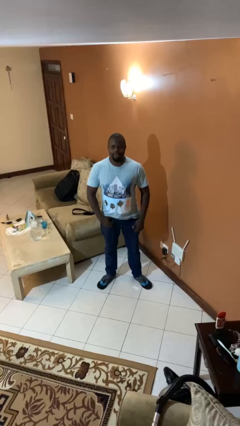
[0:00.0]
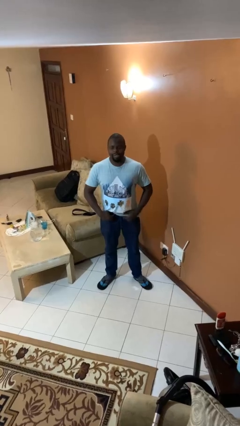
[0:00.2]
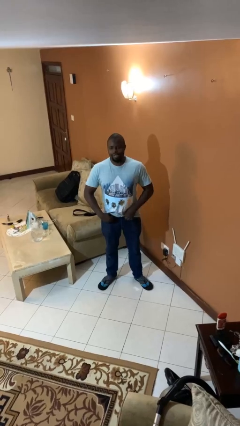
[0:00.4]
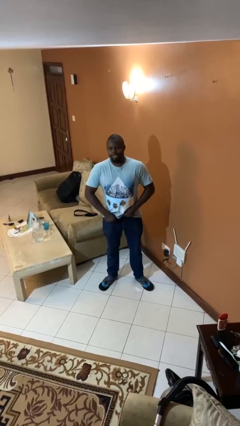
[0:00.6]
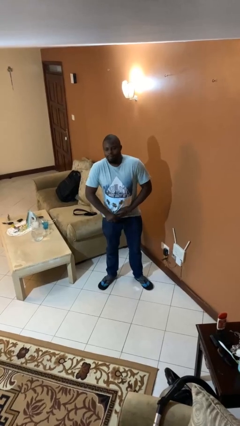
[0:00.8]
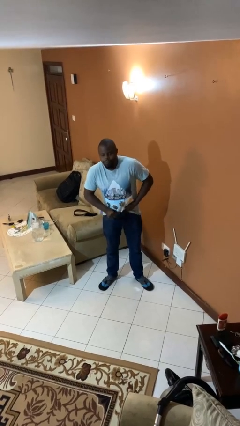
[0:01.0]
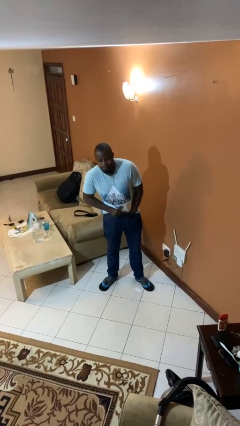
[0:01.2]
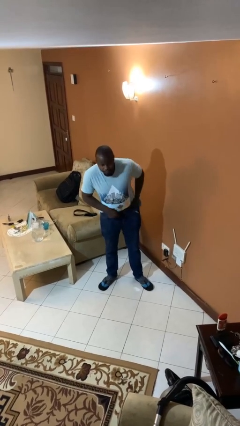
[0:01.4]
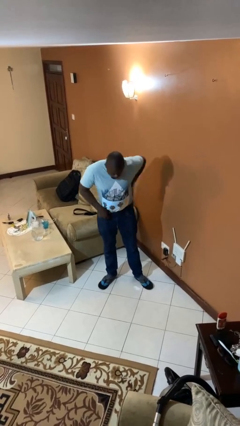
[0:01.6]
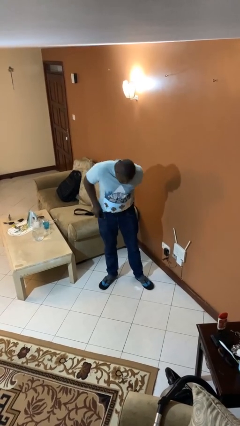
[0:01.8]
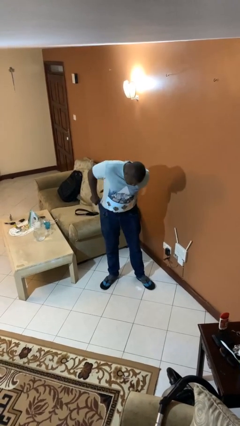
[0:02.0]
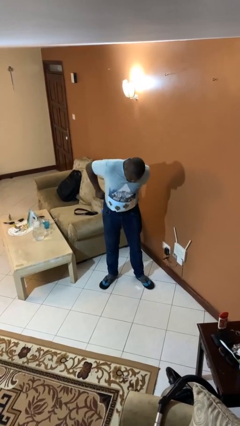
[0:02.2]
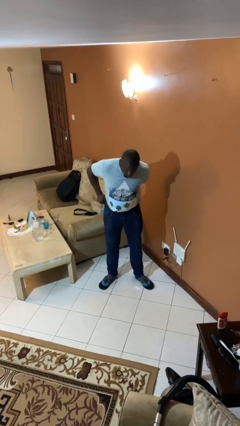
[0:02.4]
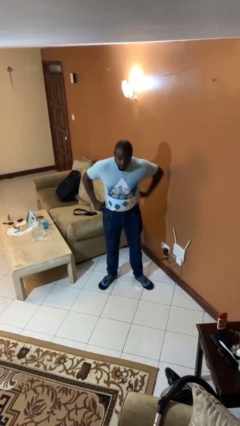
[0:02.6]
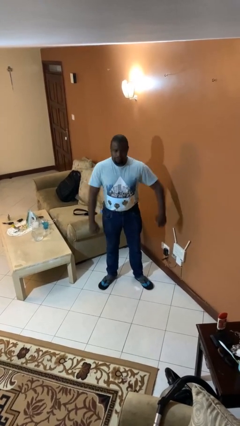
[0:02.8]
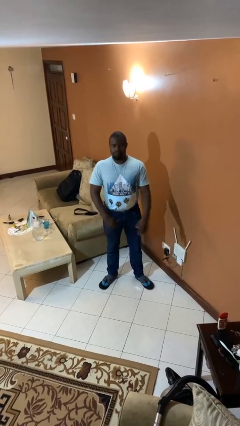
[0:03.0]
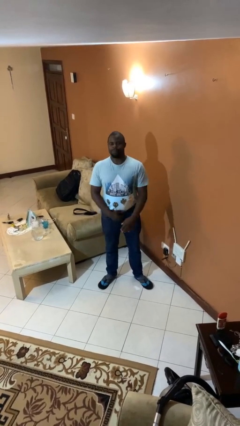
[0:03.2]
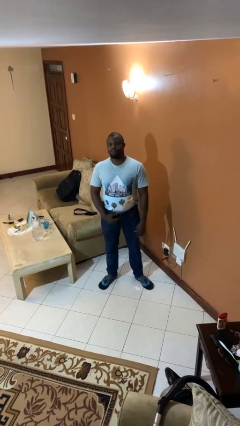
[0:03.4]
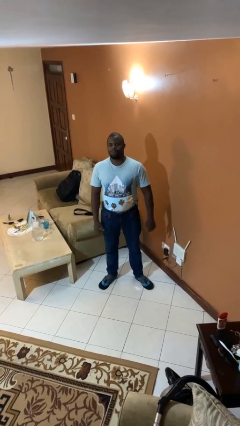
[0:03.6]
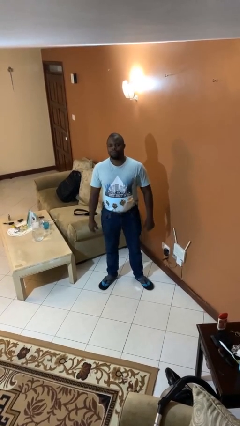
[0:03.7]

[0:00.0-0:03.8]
person tucks in shirt

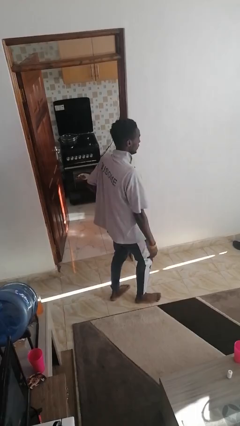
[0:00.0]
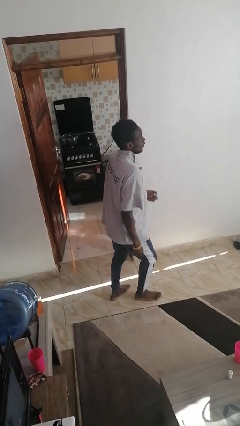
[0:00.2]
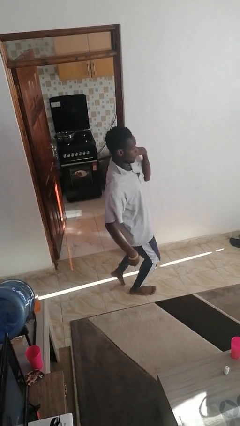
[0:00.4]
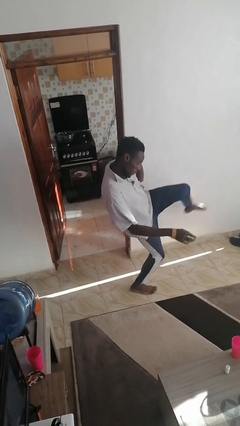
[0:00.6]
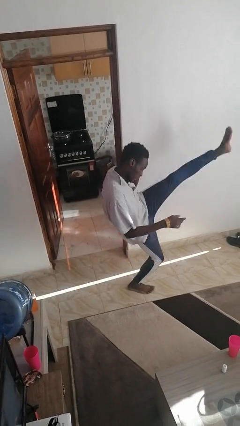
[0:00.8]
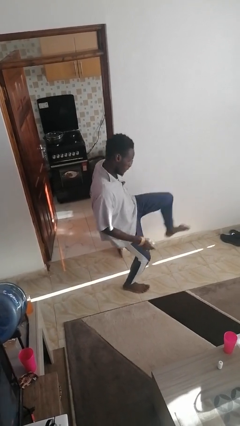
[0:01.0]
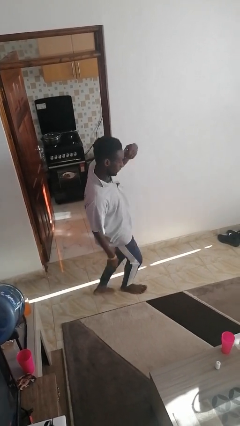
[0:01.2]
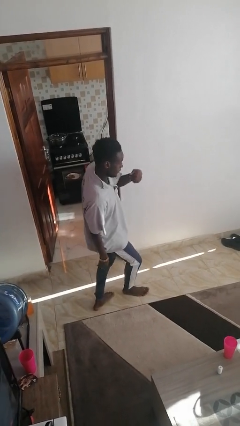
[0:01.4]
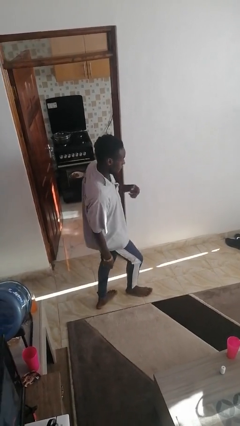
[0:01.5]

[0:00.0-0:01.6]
person karate kicks

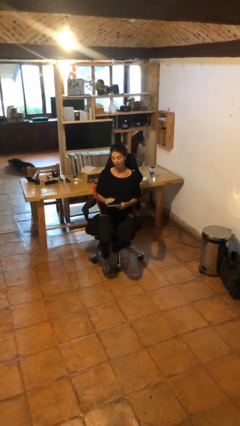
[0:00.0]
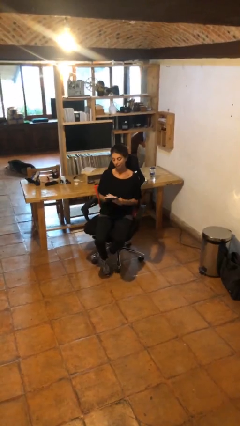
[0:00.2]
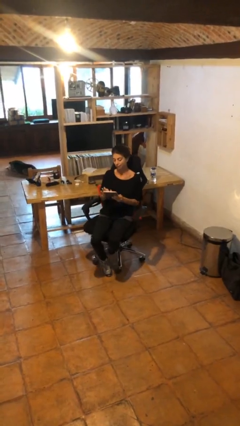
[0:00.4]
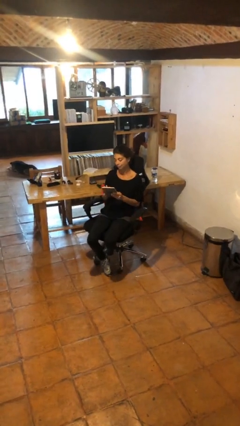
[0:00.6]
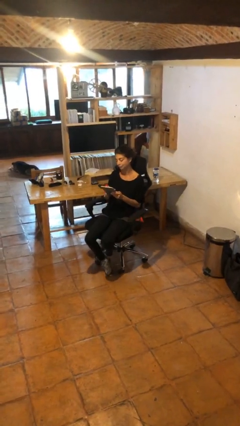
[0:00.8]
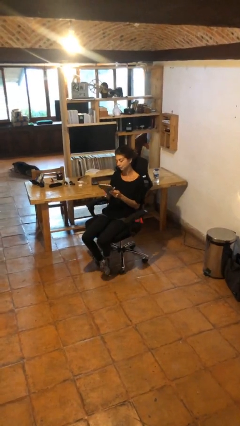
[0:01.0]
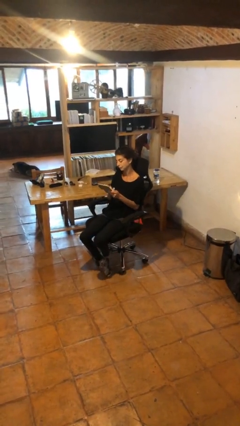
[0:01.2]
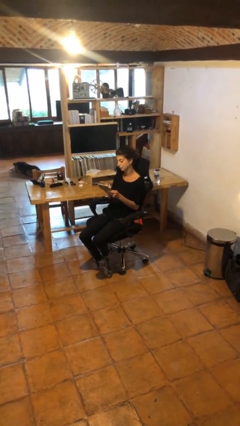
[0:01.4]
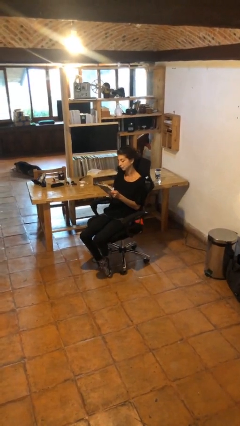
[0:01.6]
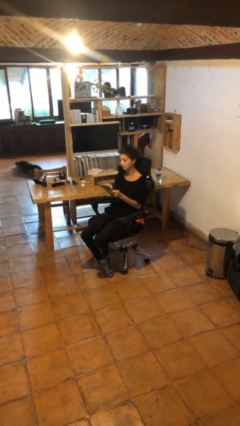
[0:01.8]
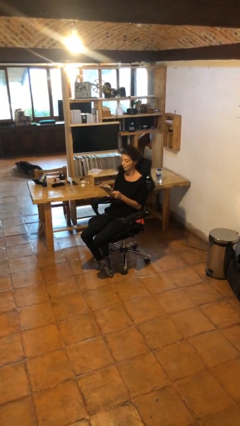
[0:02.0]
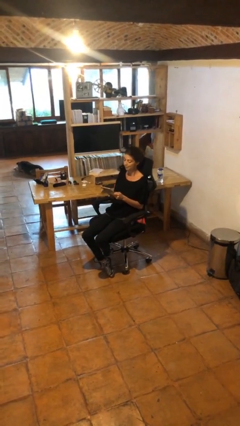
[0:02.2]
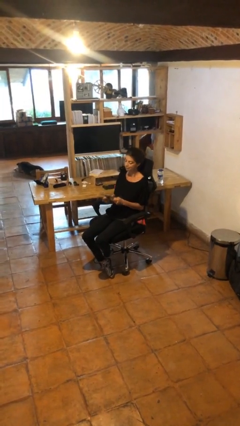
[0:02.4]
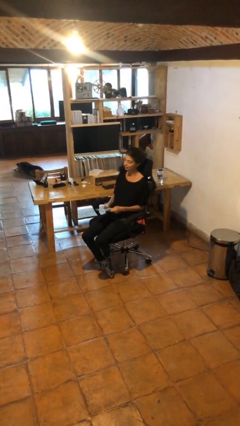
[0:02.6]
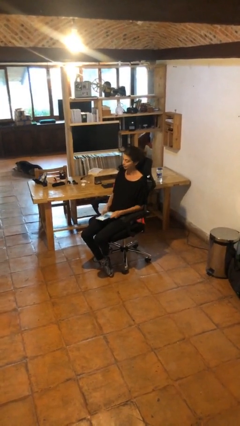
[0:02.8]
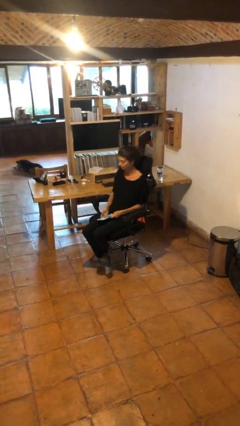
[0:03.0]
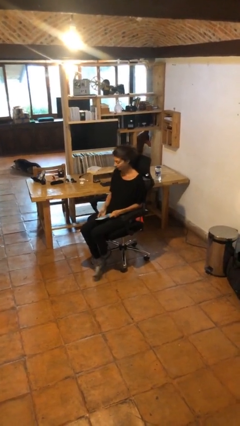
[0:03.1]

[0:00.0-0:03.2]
person interacts with tablet

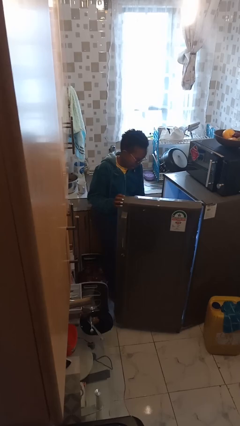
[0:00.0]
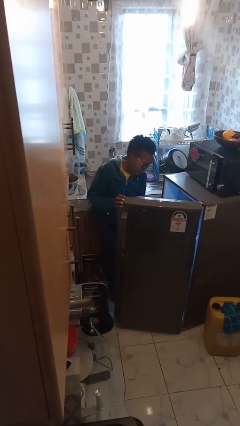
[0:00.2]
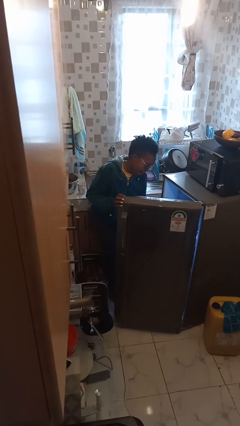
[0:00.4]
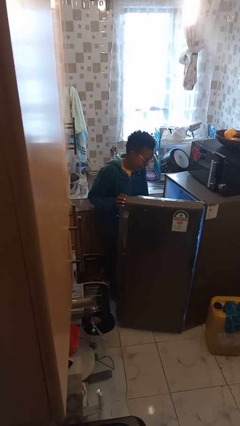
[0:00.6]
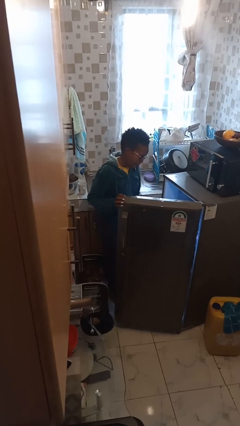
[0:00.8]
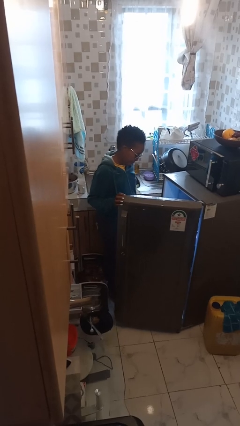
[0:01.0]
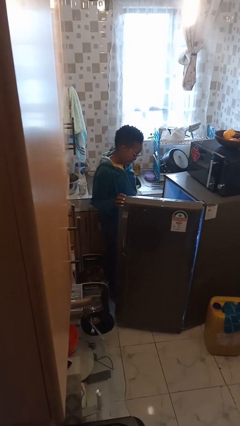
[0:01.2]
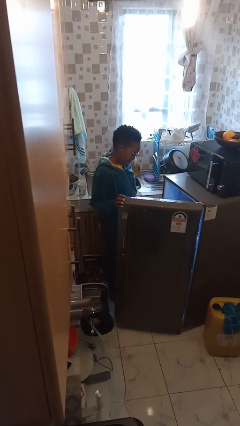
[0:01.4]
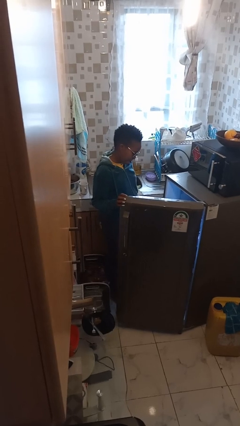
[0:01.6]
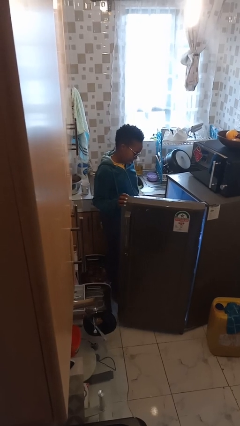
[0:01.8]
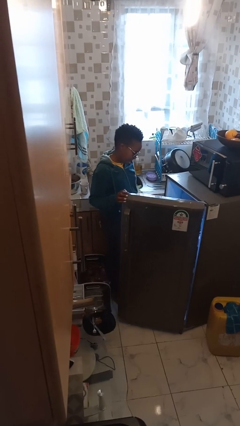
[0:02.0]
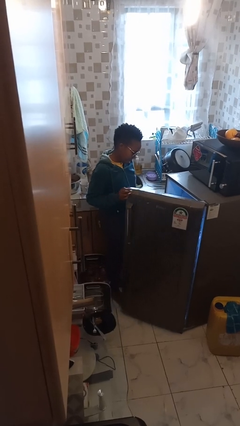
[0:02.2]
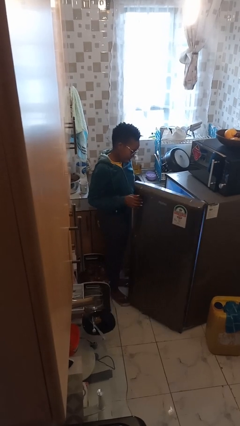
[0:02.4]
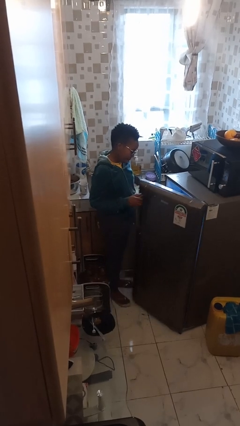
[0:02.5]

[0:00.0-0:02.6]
person puts object into refrigerator

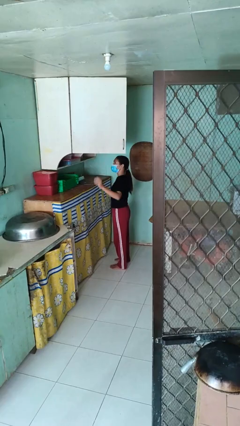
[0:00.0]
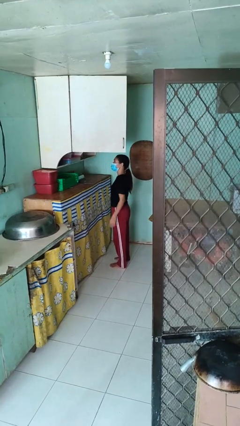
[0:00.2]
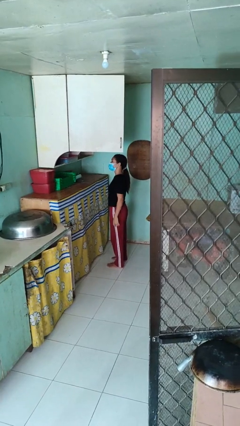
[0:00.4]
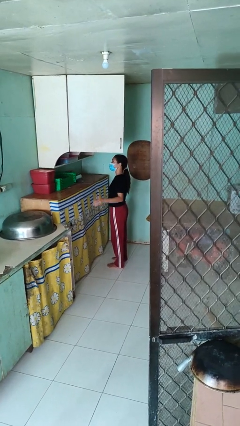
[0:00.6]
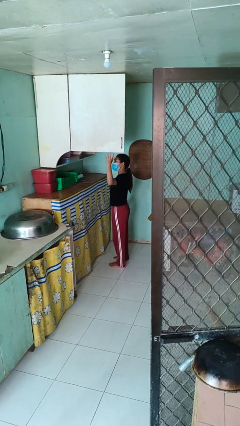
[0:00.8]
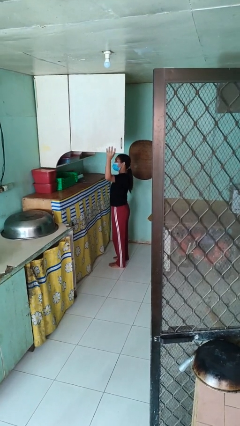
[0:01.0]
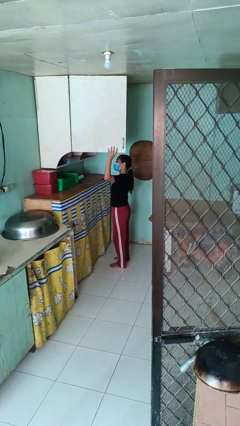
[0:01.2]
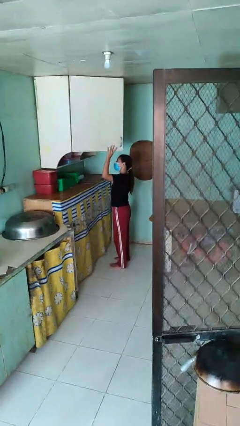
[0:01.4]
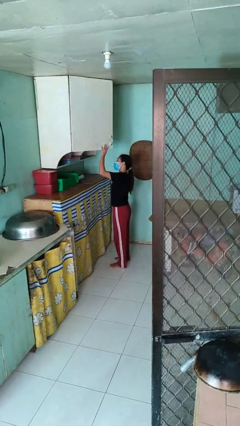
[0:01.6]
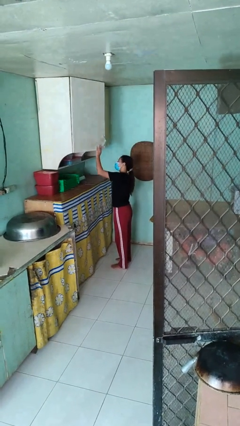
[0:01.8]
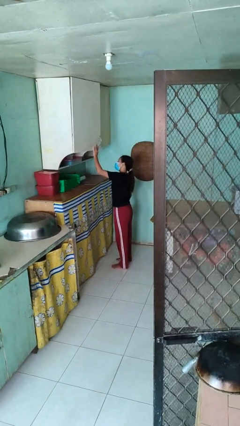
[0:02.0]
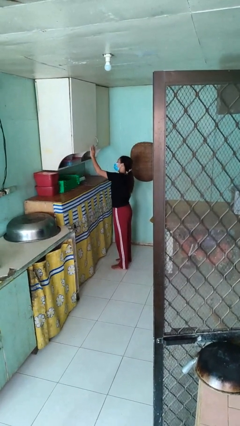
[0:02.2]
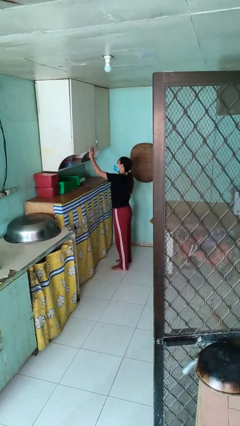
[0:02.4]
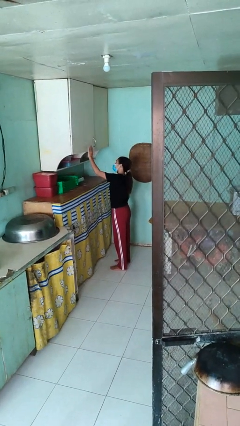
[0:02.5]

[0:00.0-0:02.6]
person closes cabinet

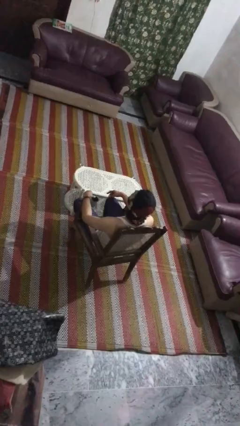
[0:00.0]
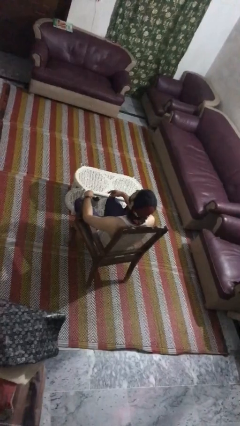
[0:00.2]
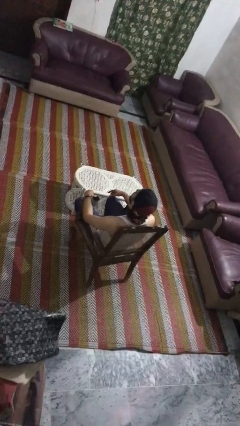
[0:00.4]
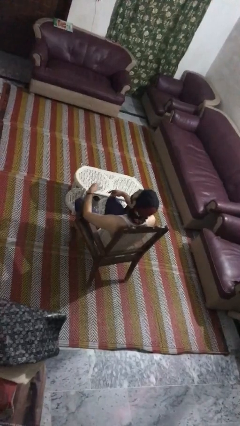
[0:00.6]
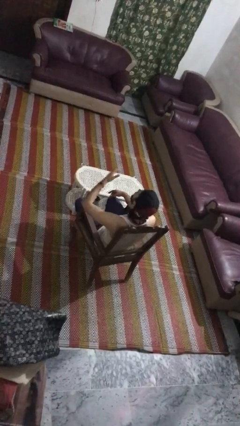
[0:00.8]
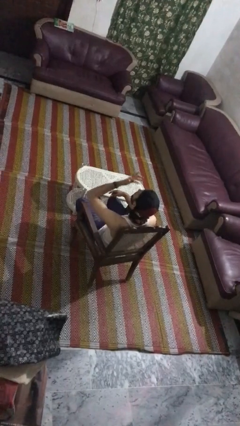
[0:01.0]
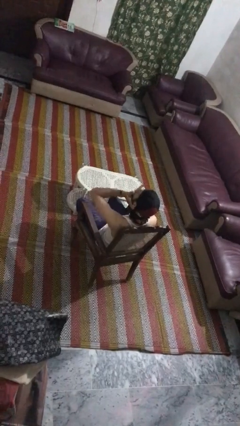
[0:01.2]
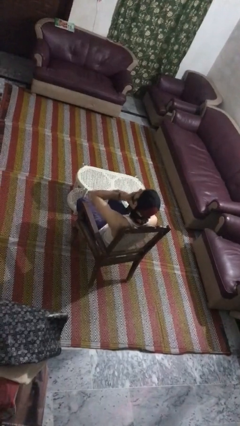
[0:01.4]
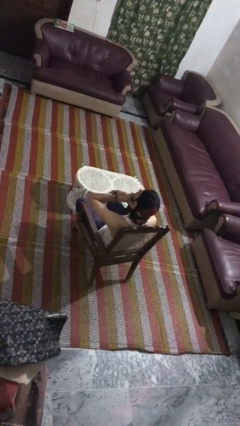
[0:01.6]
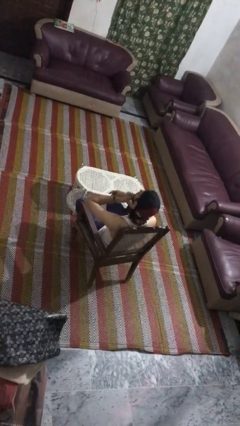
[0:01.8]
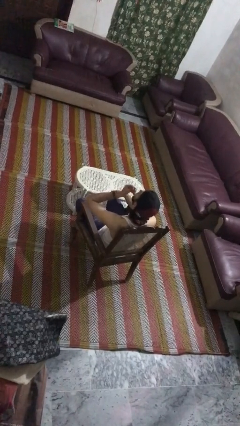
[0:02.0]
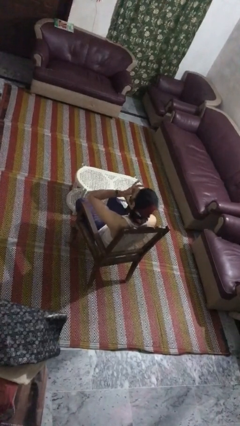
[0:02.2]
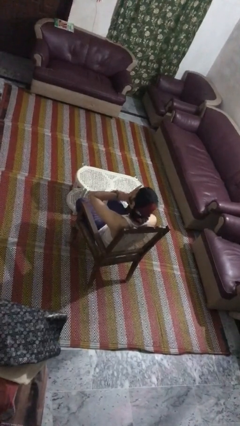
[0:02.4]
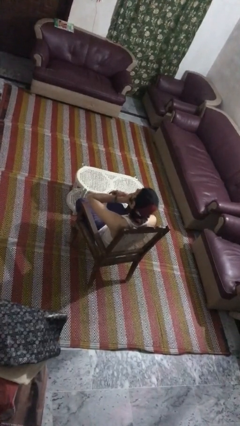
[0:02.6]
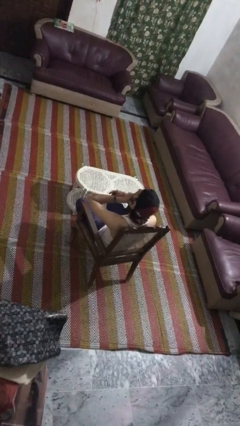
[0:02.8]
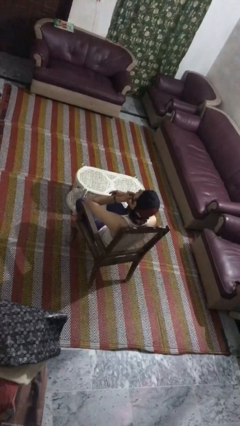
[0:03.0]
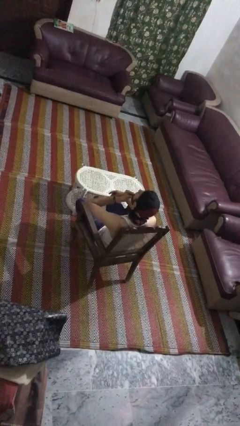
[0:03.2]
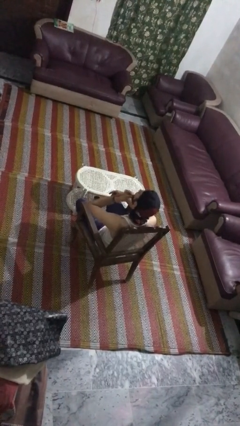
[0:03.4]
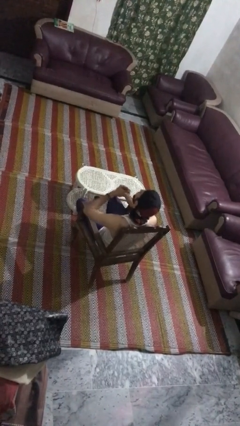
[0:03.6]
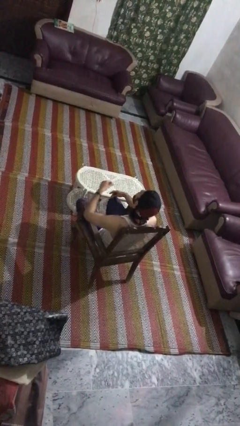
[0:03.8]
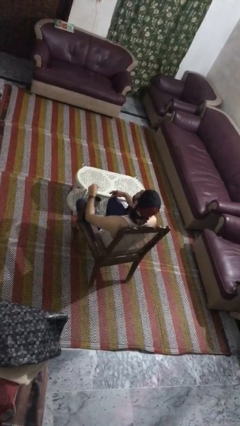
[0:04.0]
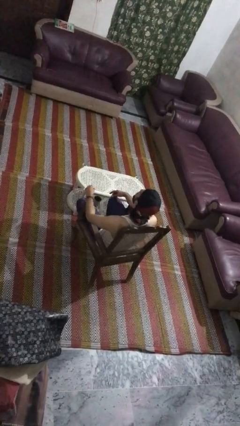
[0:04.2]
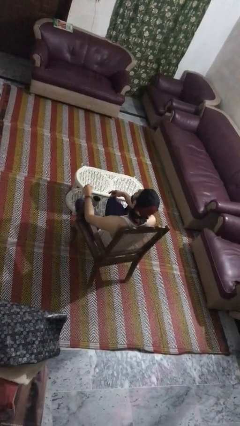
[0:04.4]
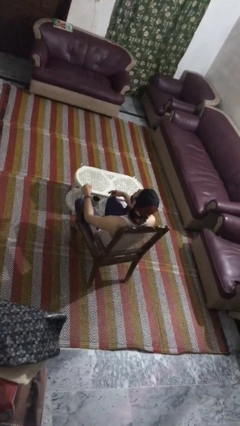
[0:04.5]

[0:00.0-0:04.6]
person strokes chin
